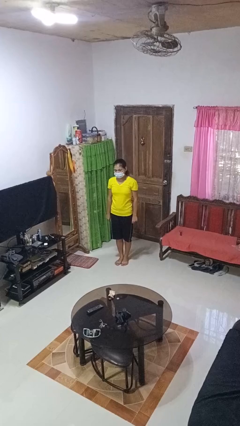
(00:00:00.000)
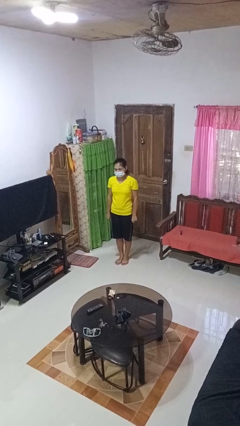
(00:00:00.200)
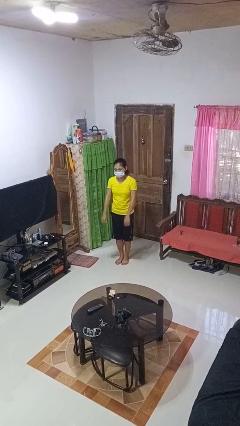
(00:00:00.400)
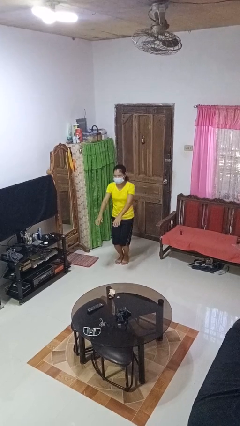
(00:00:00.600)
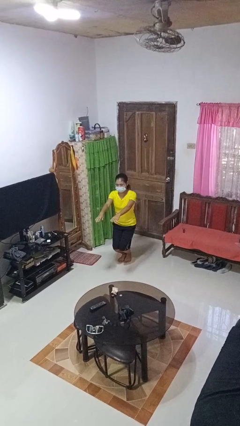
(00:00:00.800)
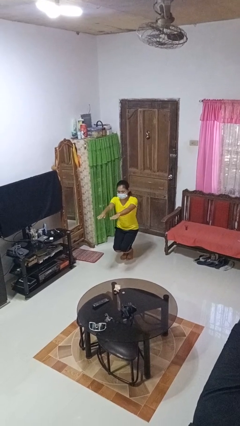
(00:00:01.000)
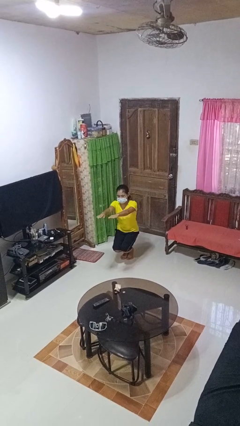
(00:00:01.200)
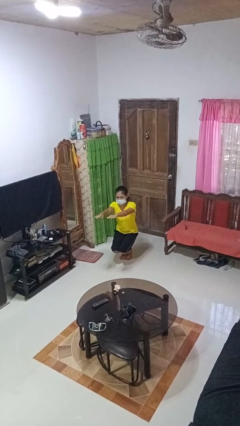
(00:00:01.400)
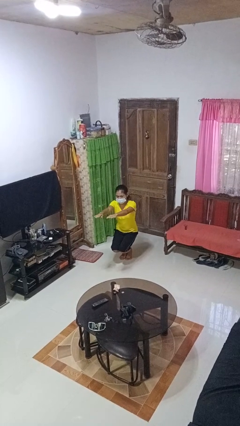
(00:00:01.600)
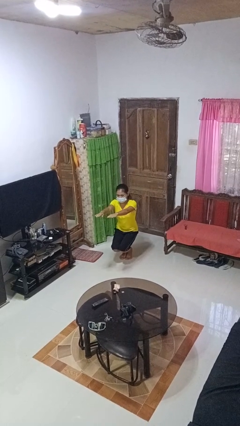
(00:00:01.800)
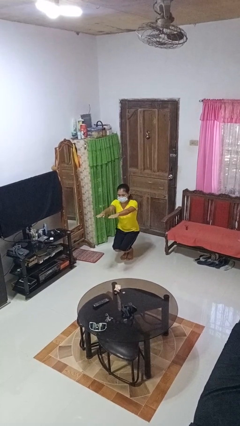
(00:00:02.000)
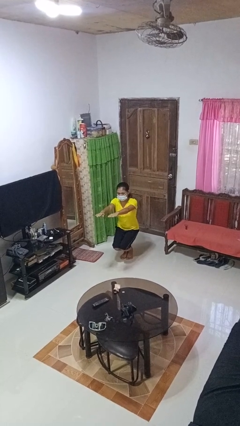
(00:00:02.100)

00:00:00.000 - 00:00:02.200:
person squats

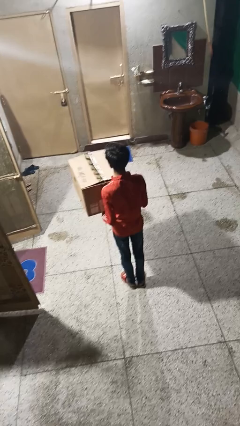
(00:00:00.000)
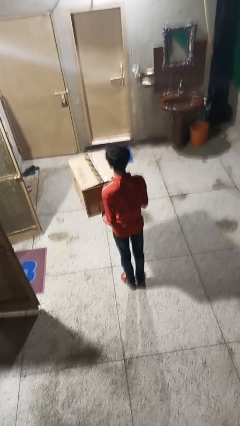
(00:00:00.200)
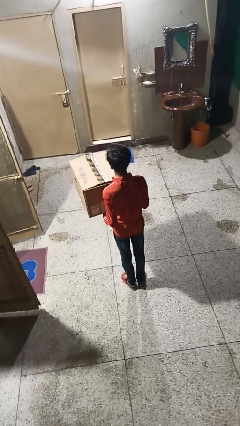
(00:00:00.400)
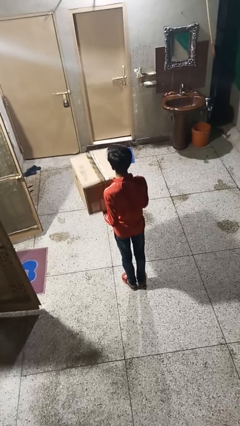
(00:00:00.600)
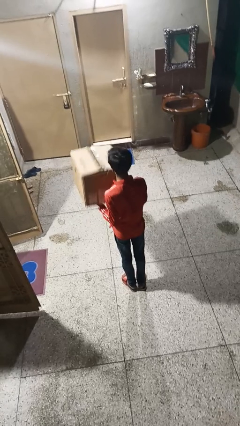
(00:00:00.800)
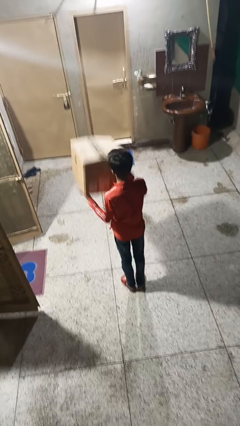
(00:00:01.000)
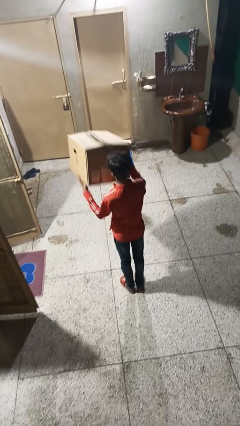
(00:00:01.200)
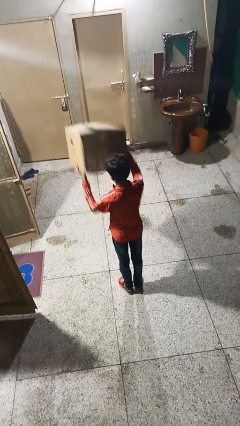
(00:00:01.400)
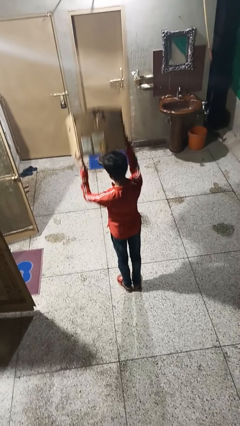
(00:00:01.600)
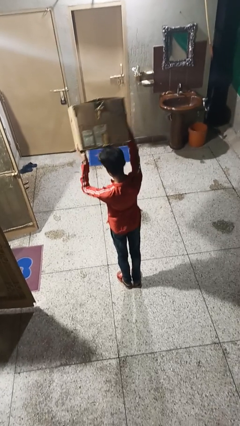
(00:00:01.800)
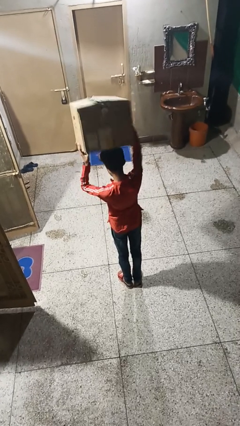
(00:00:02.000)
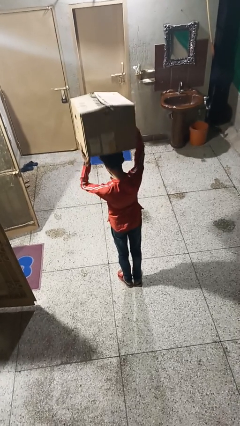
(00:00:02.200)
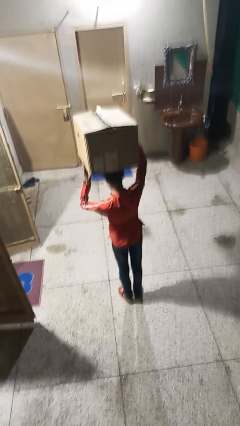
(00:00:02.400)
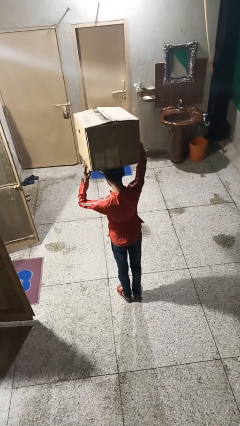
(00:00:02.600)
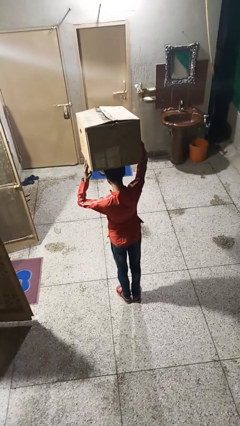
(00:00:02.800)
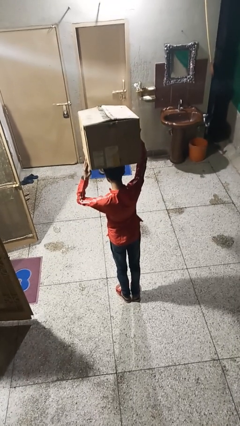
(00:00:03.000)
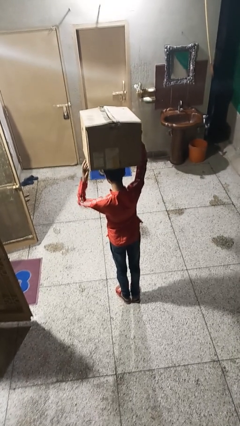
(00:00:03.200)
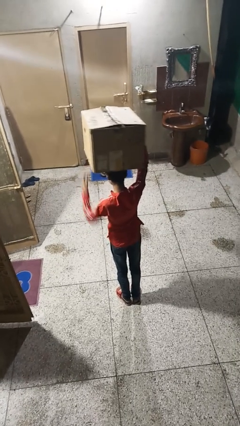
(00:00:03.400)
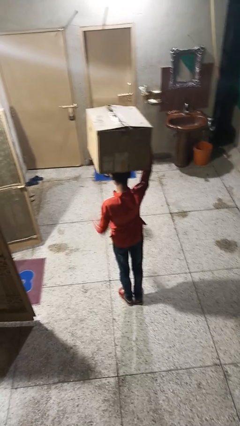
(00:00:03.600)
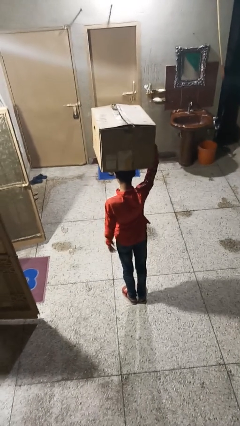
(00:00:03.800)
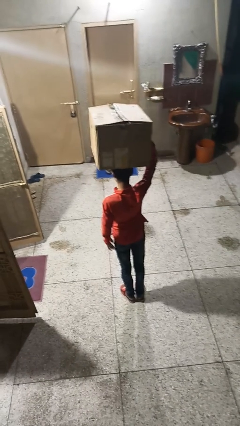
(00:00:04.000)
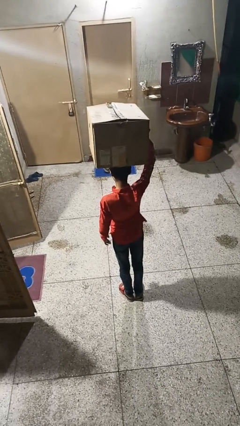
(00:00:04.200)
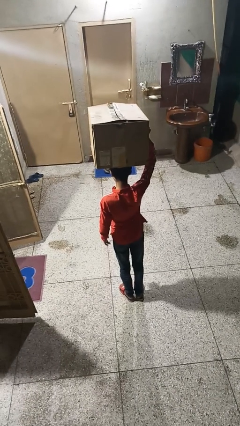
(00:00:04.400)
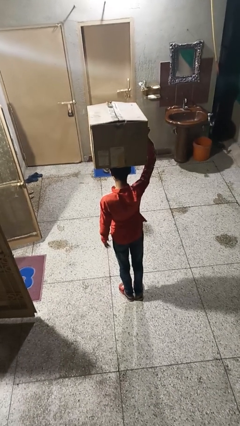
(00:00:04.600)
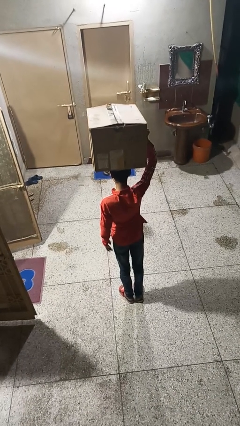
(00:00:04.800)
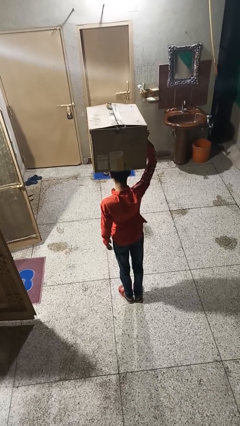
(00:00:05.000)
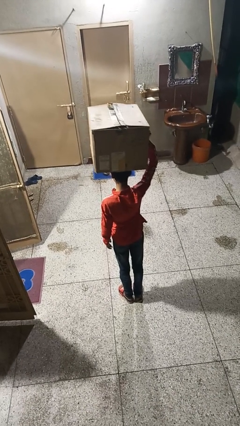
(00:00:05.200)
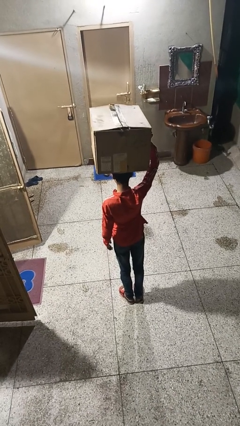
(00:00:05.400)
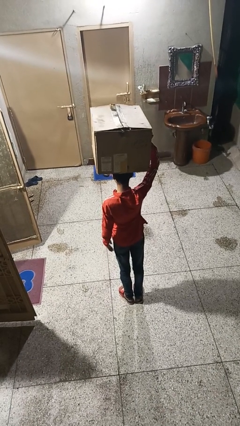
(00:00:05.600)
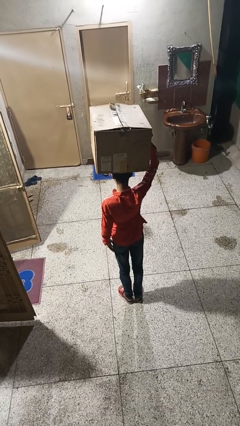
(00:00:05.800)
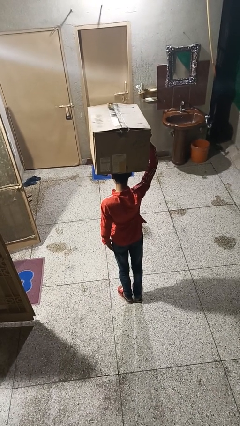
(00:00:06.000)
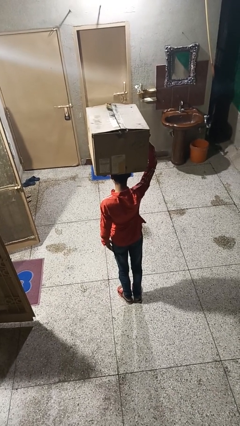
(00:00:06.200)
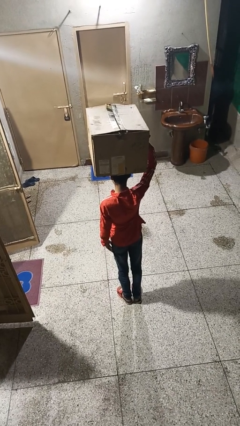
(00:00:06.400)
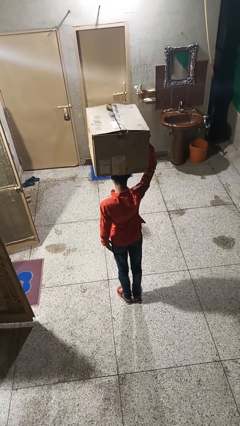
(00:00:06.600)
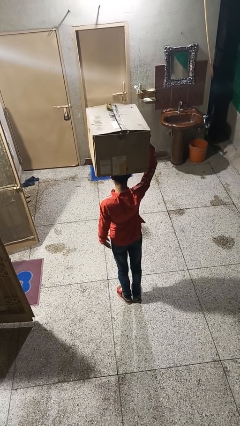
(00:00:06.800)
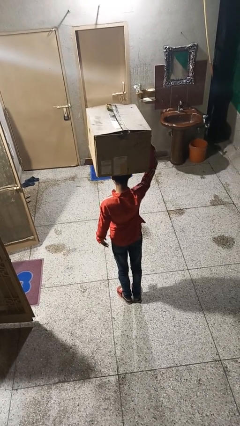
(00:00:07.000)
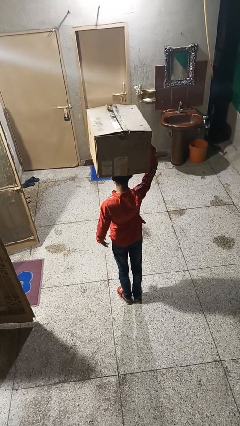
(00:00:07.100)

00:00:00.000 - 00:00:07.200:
person holds object above head

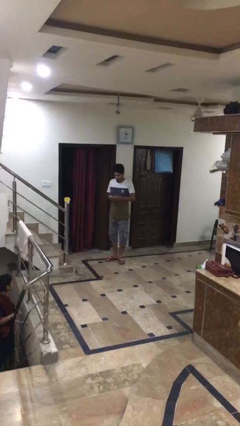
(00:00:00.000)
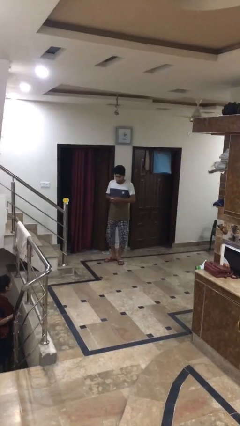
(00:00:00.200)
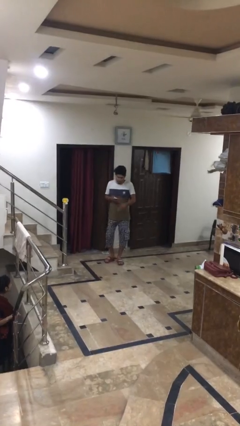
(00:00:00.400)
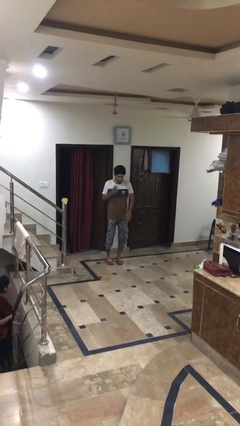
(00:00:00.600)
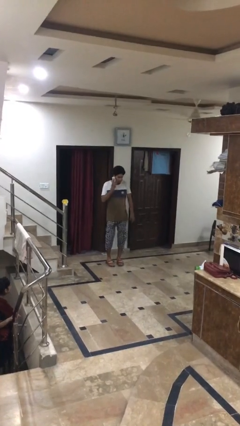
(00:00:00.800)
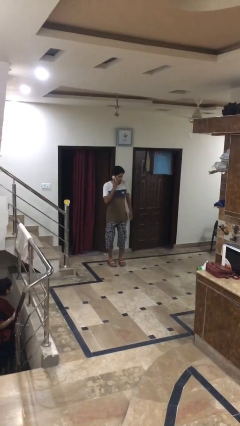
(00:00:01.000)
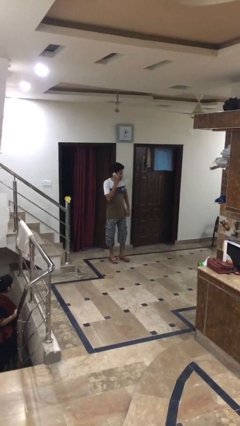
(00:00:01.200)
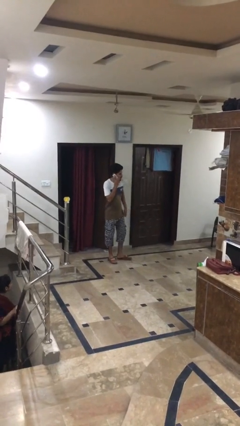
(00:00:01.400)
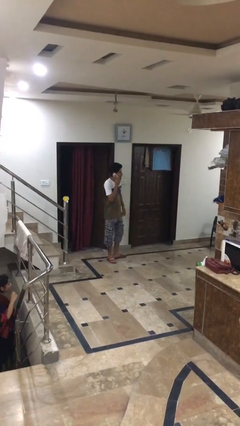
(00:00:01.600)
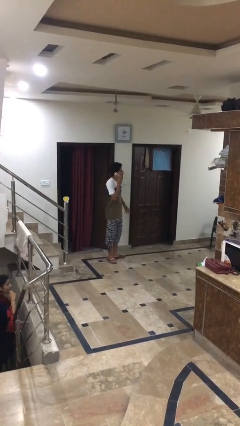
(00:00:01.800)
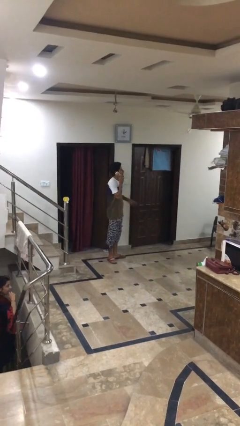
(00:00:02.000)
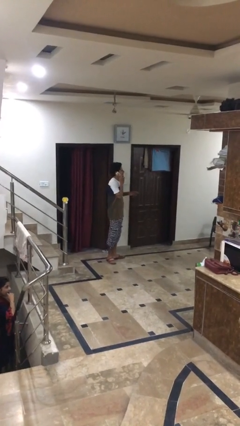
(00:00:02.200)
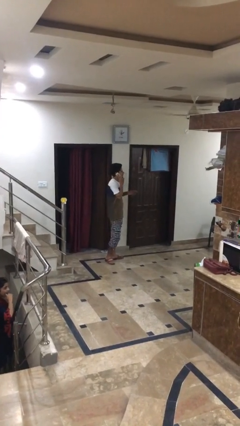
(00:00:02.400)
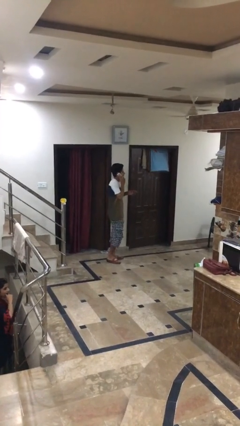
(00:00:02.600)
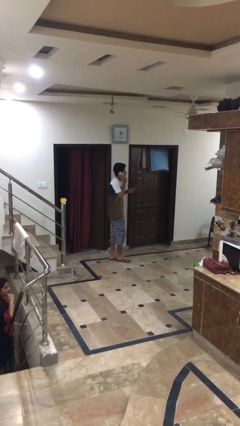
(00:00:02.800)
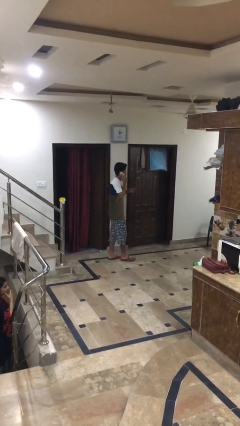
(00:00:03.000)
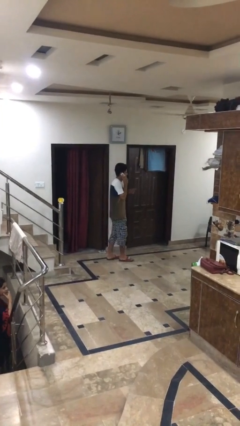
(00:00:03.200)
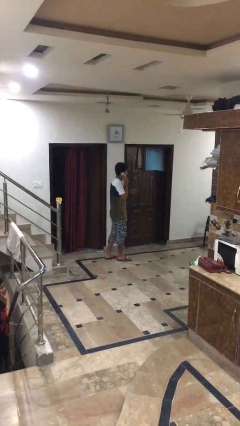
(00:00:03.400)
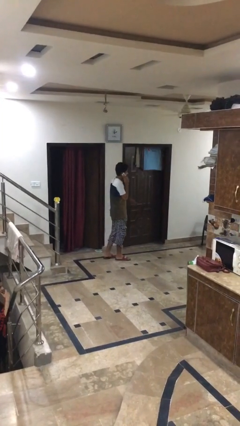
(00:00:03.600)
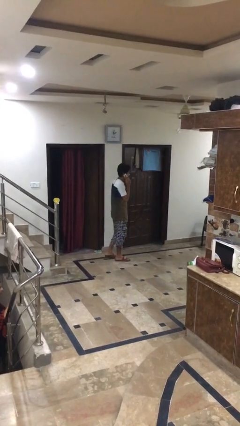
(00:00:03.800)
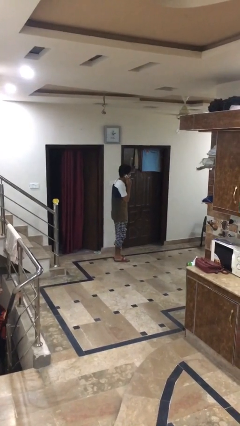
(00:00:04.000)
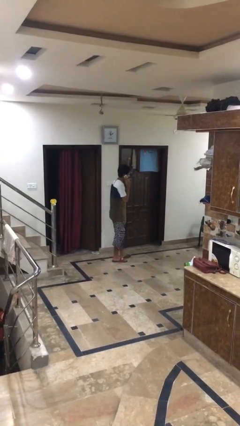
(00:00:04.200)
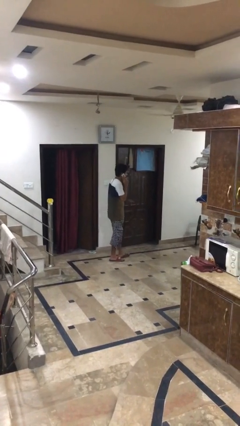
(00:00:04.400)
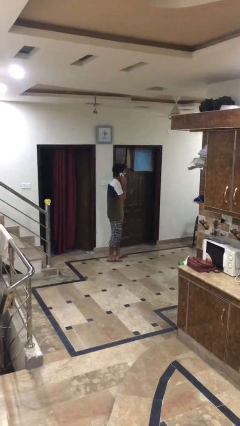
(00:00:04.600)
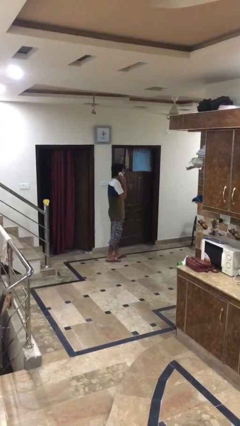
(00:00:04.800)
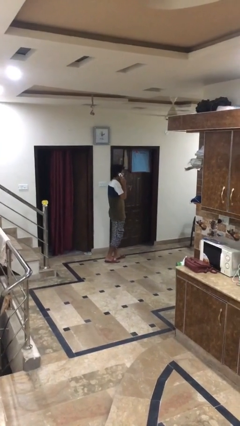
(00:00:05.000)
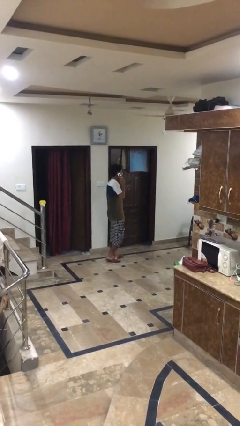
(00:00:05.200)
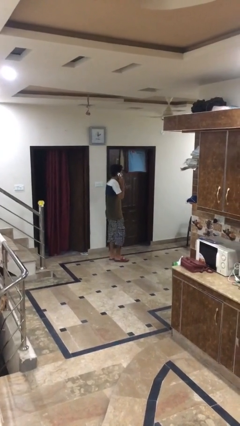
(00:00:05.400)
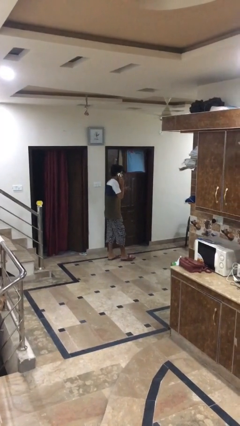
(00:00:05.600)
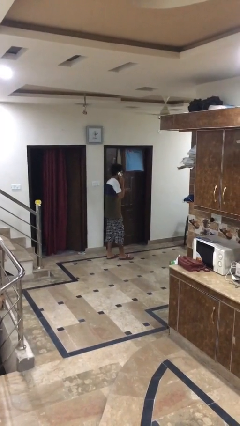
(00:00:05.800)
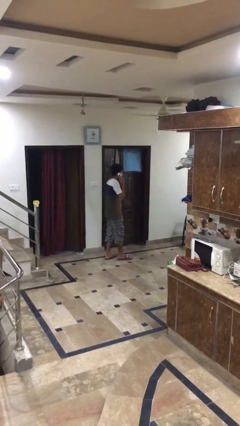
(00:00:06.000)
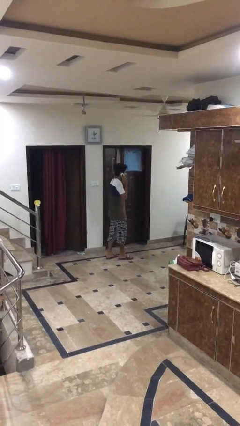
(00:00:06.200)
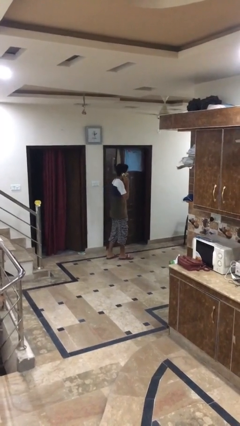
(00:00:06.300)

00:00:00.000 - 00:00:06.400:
person talks on phone

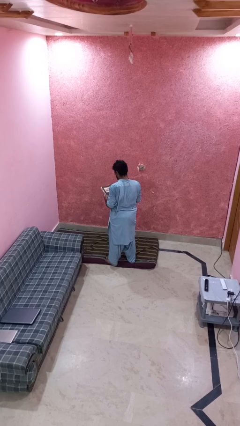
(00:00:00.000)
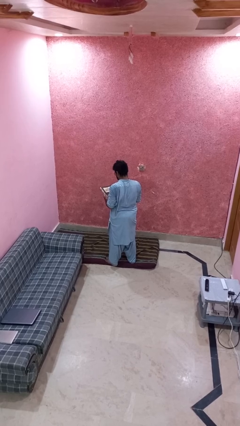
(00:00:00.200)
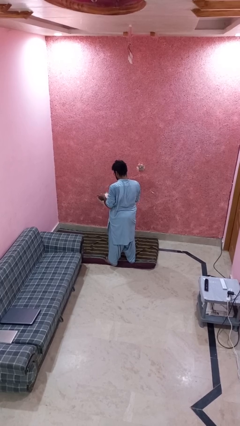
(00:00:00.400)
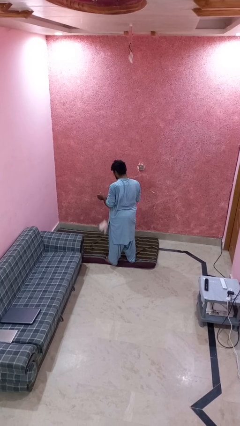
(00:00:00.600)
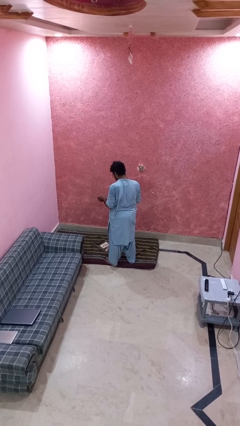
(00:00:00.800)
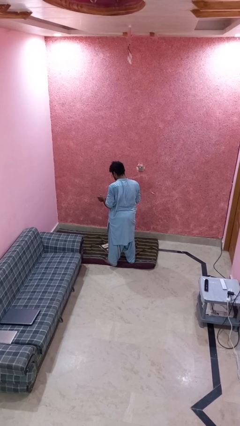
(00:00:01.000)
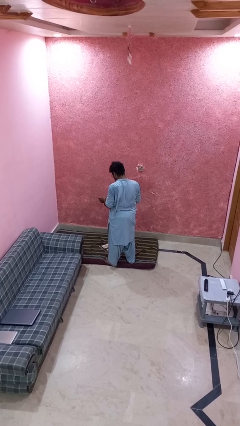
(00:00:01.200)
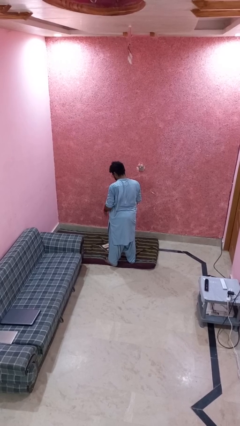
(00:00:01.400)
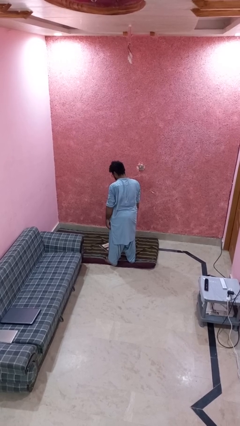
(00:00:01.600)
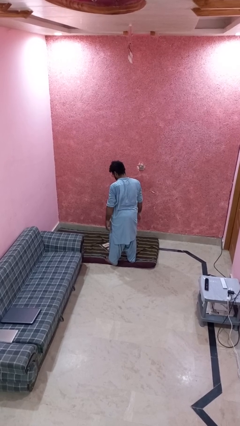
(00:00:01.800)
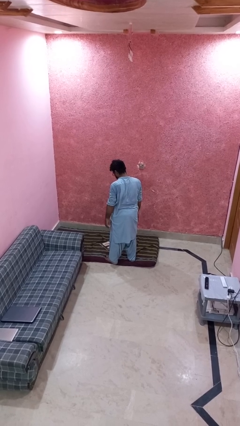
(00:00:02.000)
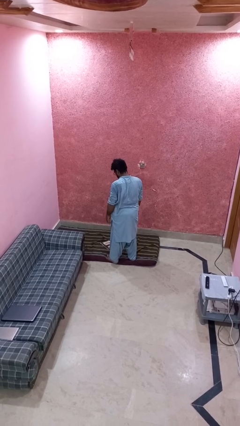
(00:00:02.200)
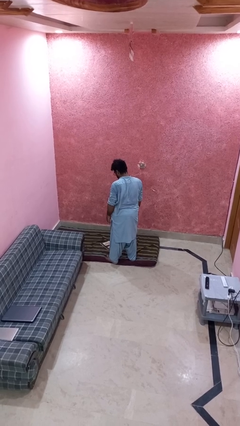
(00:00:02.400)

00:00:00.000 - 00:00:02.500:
person drops object
